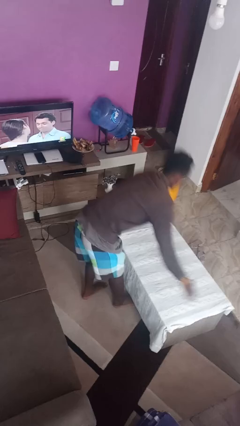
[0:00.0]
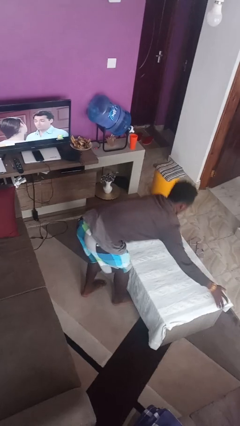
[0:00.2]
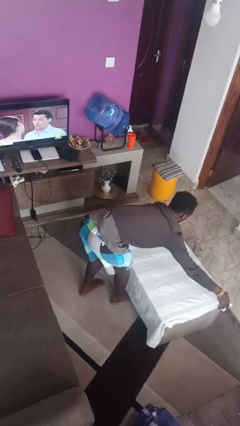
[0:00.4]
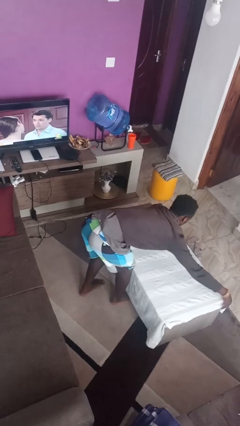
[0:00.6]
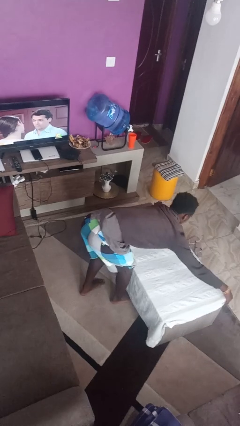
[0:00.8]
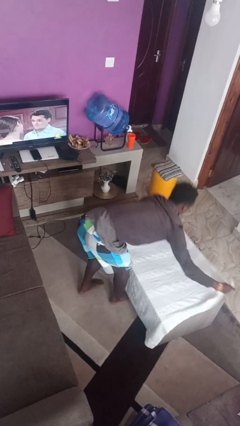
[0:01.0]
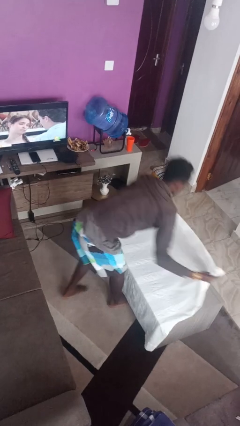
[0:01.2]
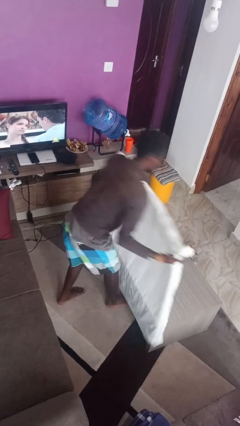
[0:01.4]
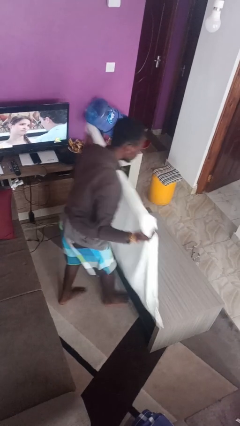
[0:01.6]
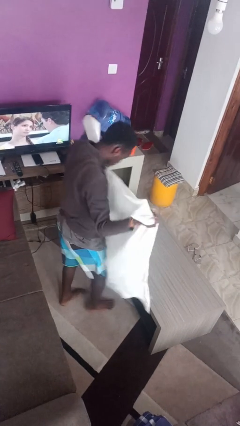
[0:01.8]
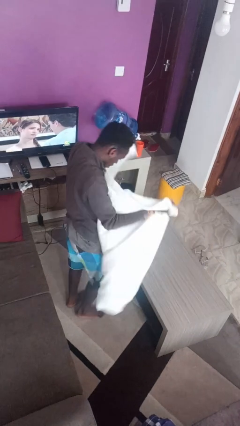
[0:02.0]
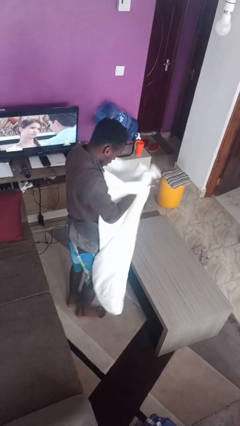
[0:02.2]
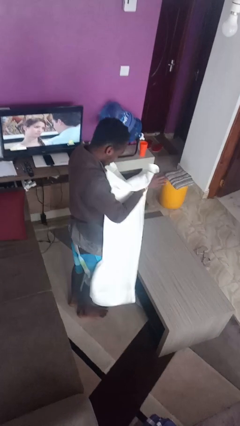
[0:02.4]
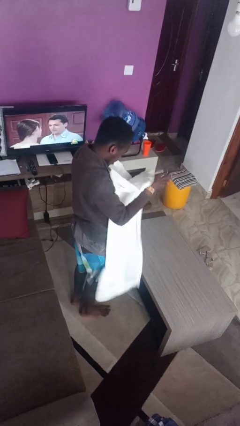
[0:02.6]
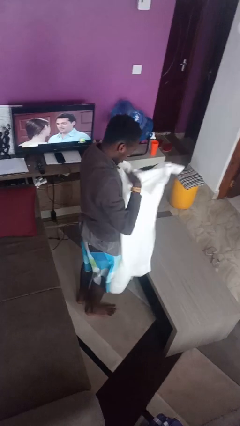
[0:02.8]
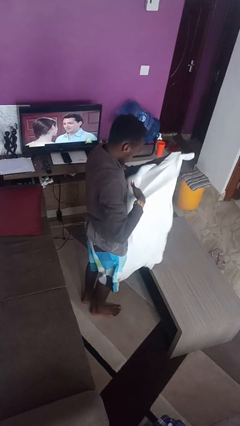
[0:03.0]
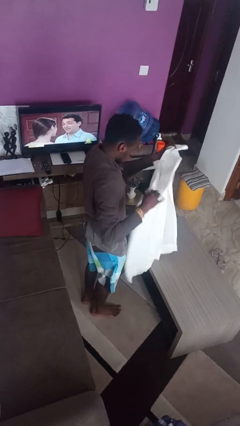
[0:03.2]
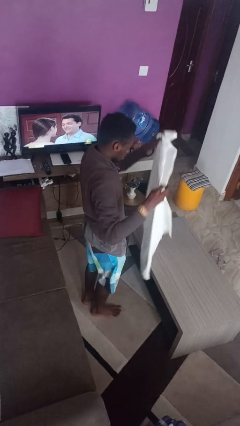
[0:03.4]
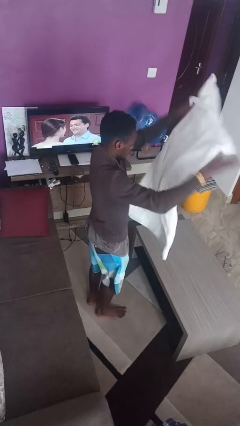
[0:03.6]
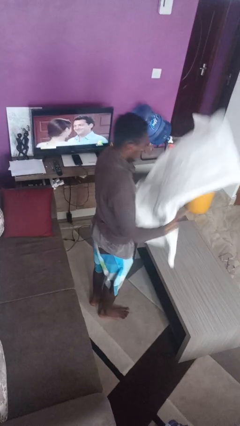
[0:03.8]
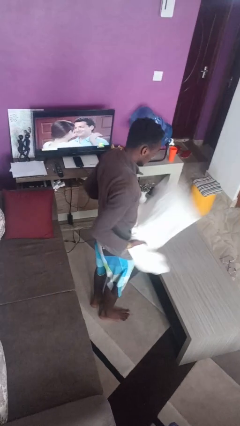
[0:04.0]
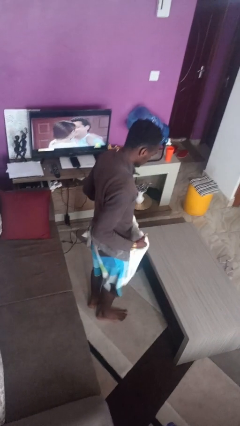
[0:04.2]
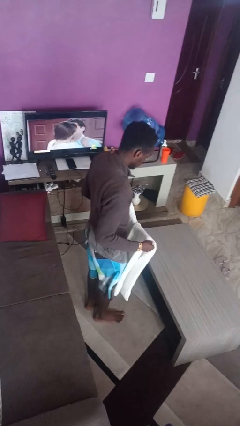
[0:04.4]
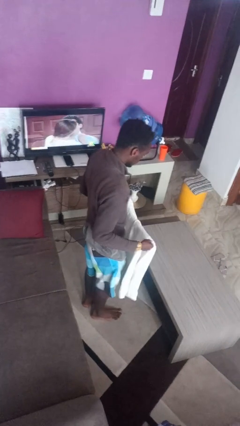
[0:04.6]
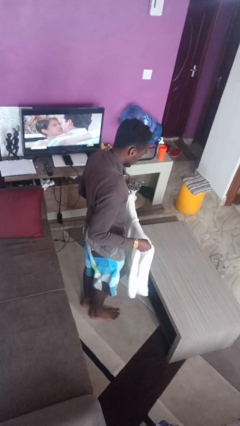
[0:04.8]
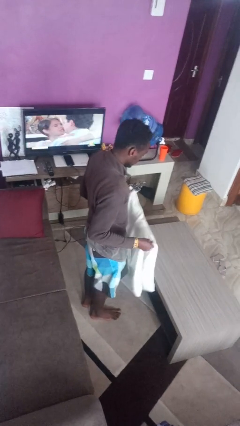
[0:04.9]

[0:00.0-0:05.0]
person folds tablecloth

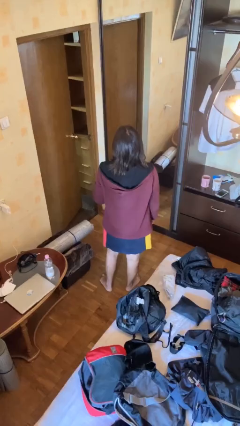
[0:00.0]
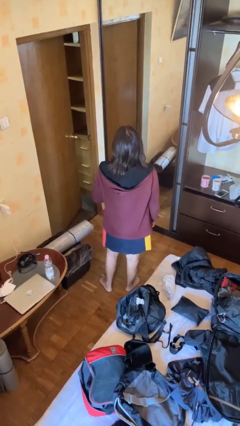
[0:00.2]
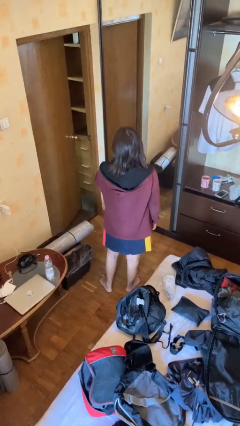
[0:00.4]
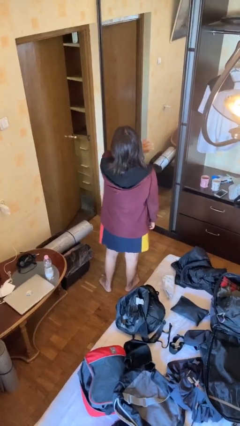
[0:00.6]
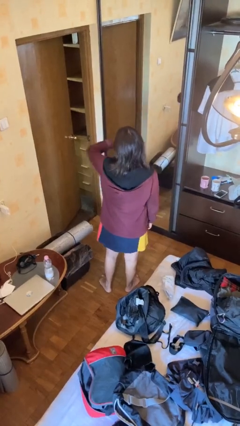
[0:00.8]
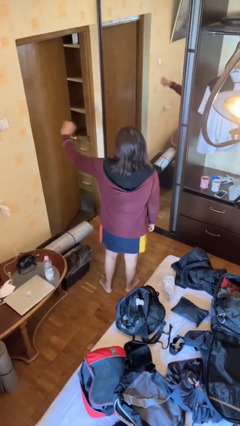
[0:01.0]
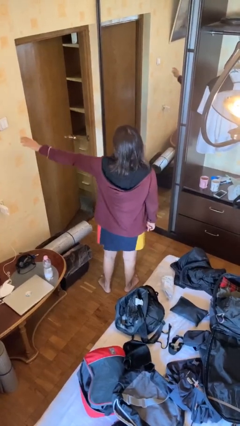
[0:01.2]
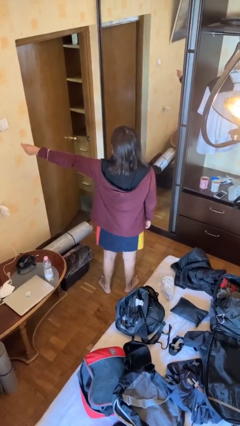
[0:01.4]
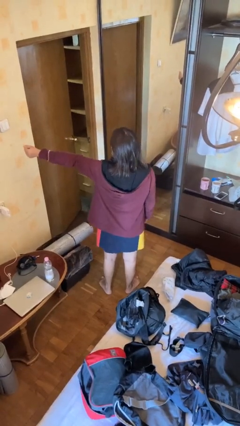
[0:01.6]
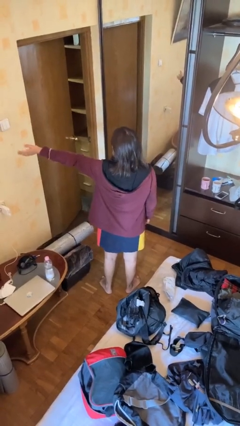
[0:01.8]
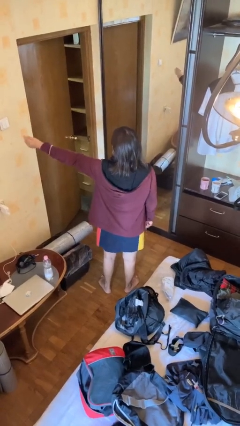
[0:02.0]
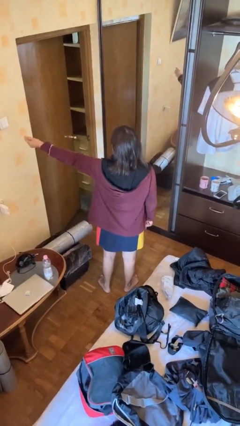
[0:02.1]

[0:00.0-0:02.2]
person gestures swipe left

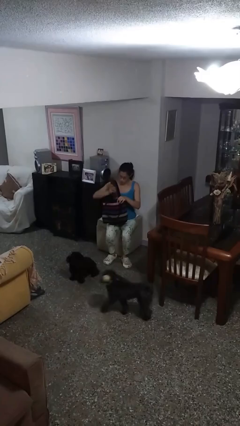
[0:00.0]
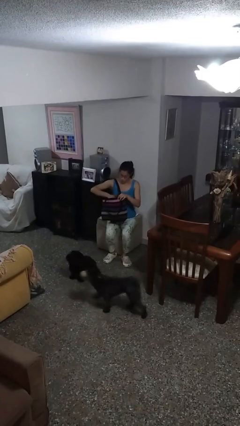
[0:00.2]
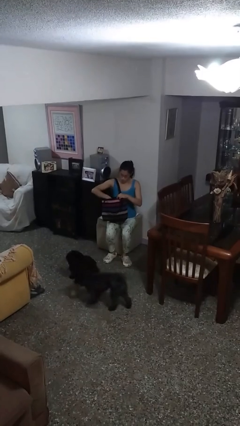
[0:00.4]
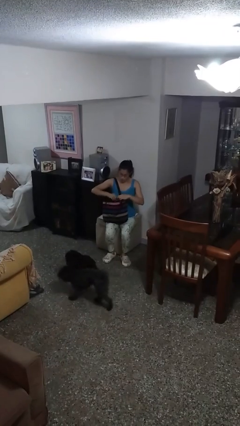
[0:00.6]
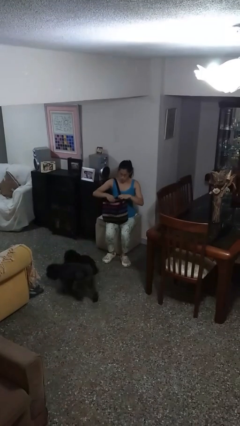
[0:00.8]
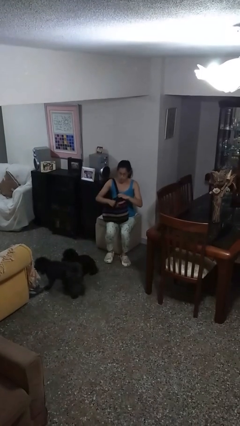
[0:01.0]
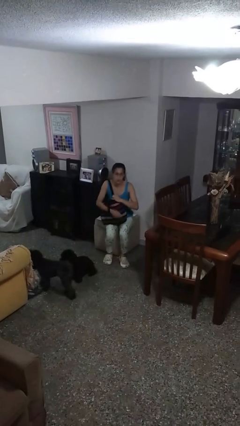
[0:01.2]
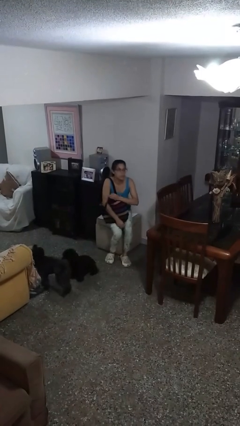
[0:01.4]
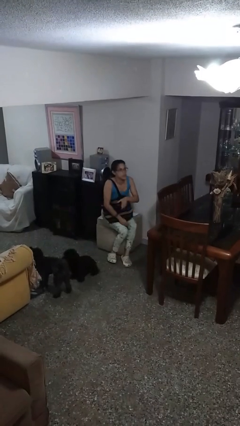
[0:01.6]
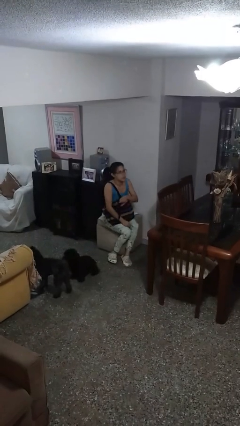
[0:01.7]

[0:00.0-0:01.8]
person puts object into purse

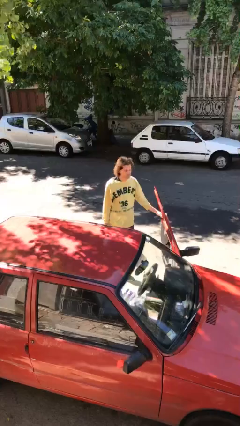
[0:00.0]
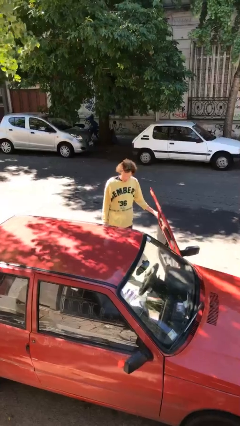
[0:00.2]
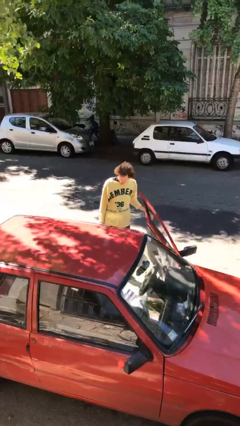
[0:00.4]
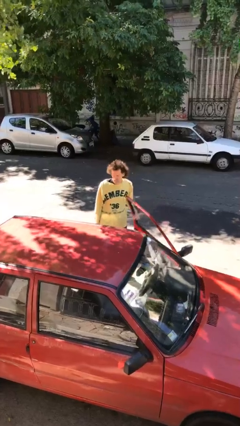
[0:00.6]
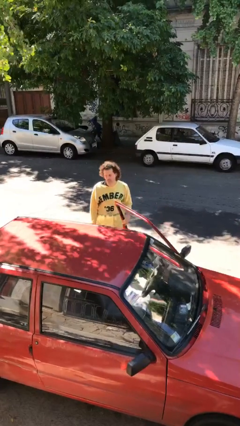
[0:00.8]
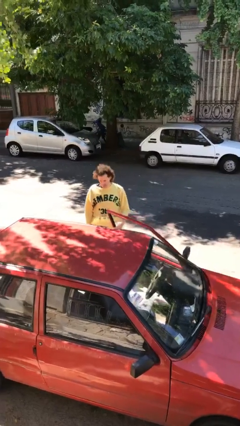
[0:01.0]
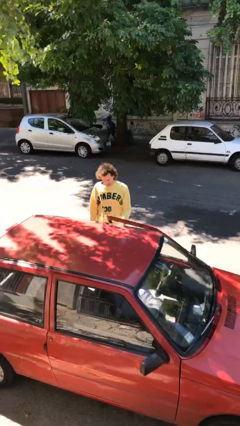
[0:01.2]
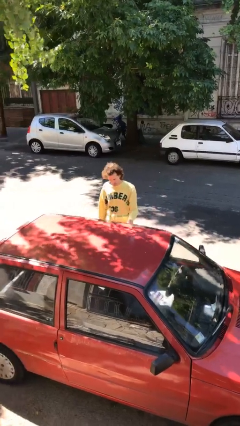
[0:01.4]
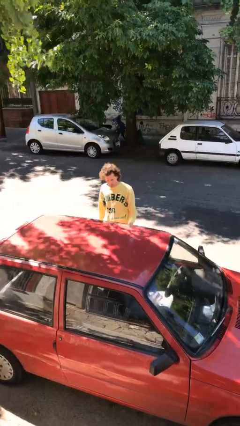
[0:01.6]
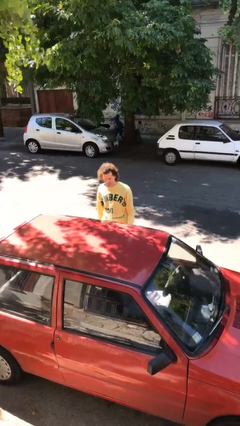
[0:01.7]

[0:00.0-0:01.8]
person closes car door

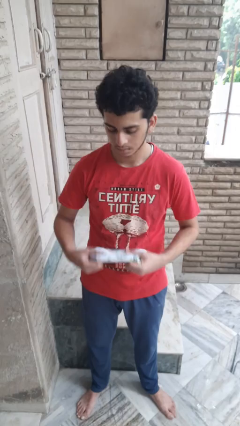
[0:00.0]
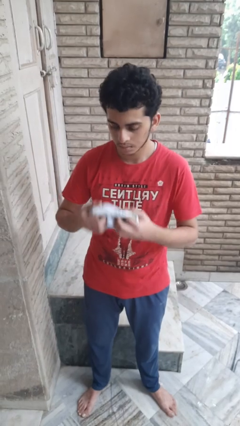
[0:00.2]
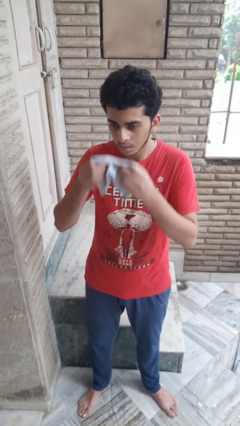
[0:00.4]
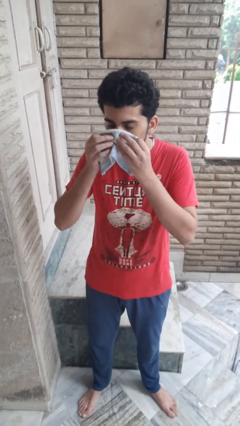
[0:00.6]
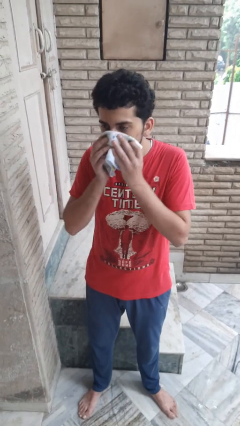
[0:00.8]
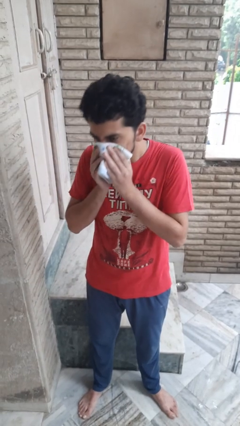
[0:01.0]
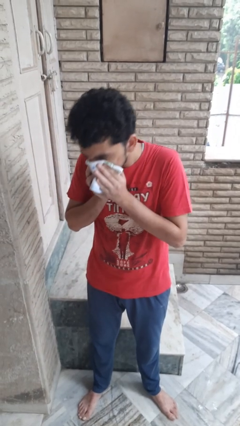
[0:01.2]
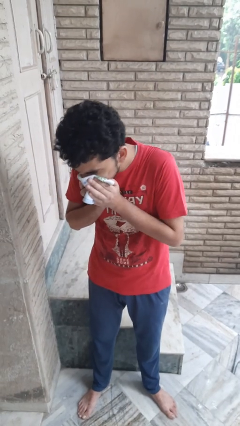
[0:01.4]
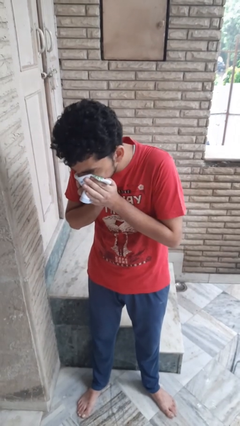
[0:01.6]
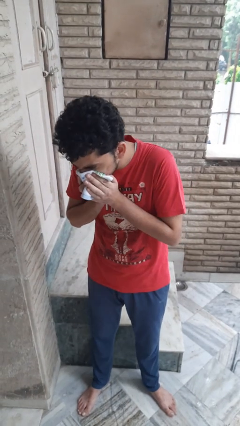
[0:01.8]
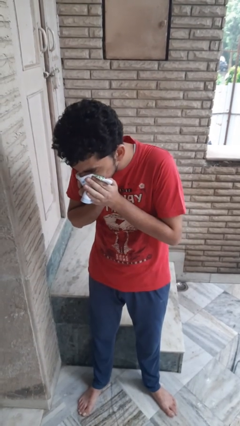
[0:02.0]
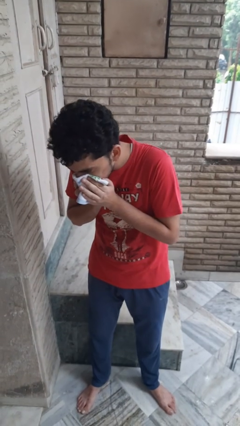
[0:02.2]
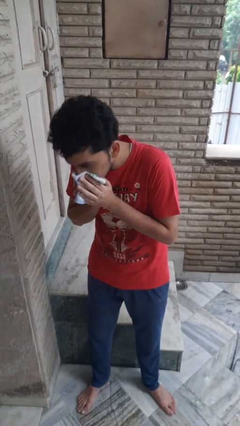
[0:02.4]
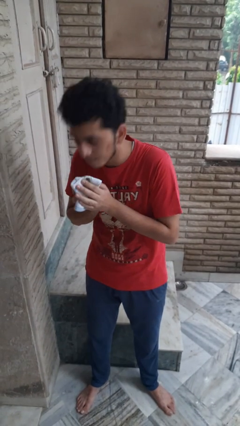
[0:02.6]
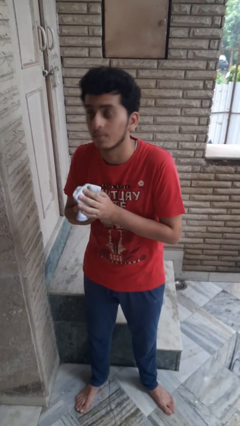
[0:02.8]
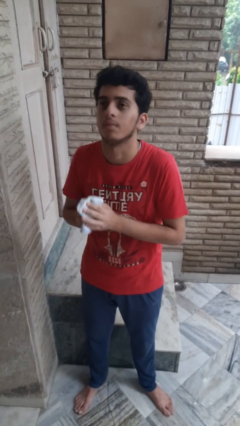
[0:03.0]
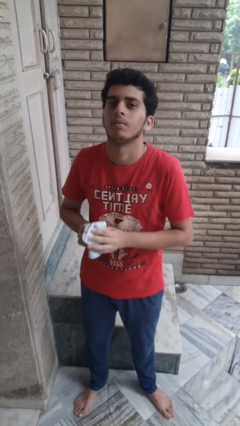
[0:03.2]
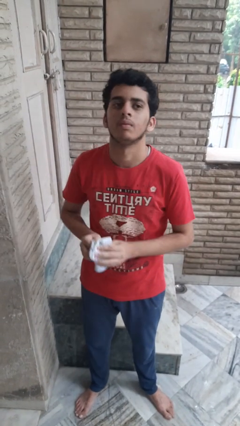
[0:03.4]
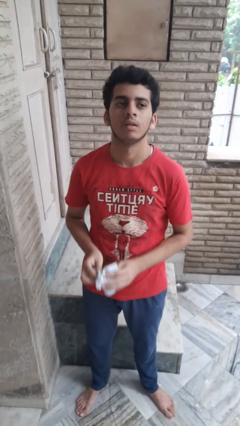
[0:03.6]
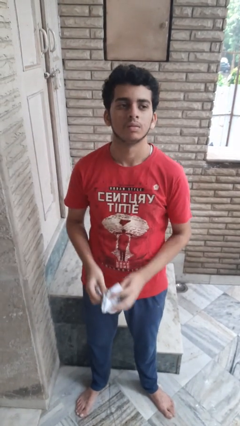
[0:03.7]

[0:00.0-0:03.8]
person blows nose

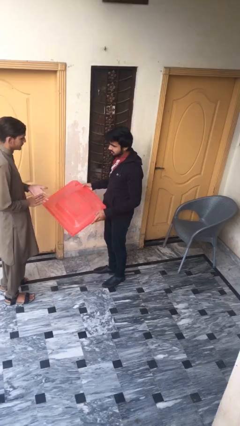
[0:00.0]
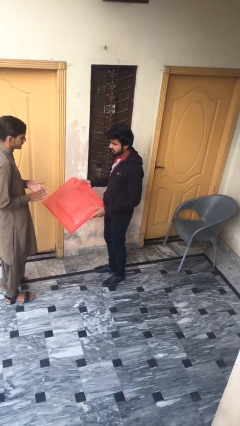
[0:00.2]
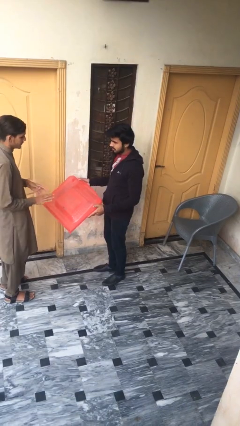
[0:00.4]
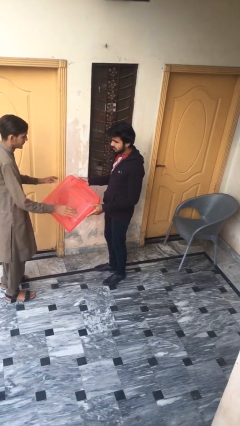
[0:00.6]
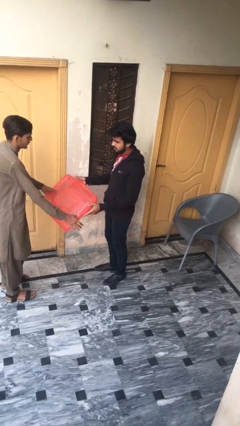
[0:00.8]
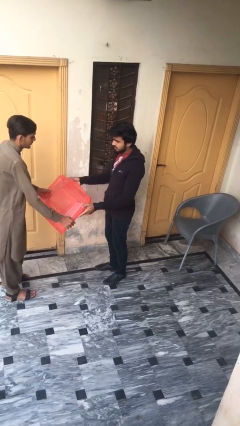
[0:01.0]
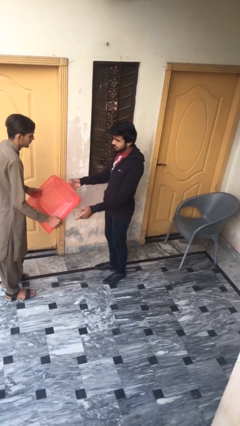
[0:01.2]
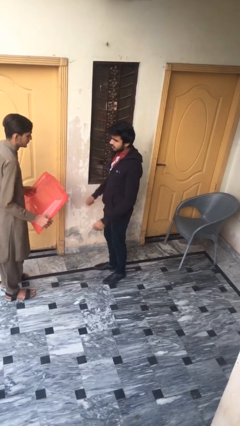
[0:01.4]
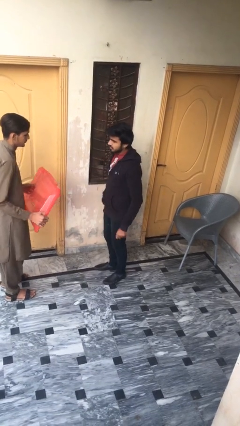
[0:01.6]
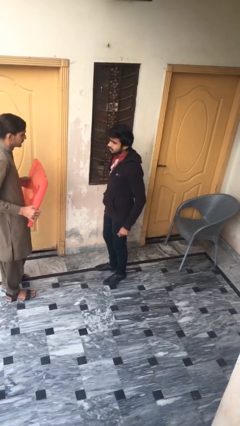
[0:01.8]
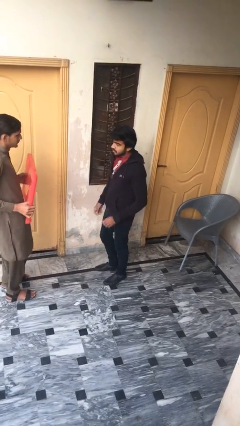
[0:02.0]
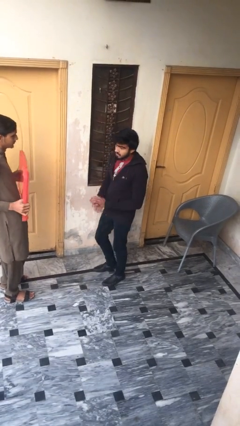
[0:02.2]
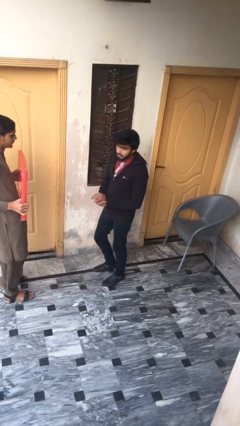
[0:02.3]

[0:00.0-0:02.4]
person transfers object to person

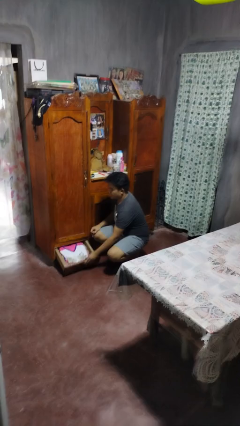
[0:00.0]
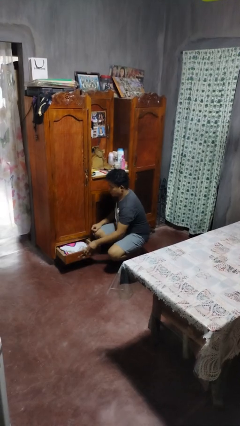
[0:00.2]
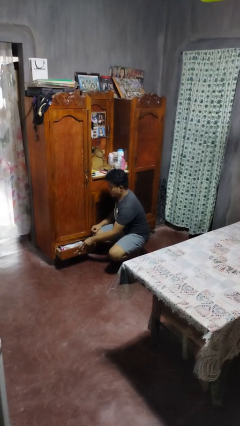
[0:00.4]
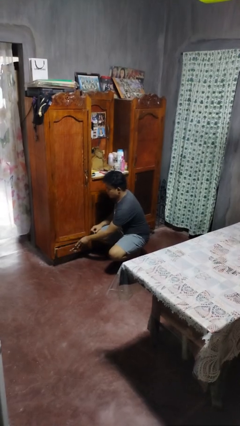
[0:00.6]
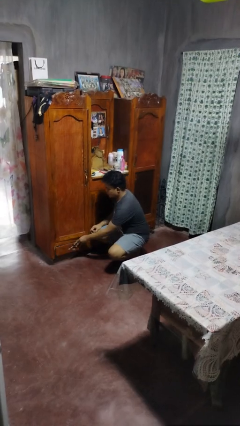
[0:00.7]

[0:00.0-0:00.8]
person closes dresser drawer
